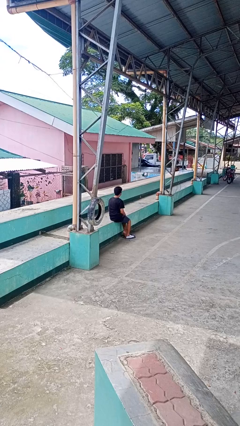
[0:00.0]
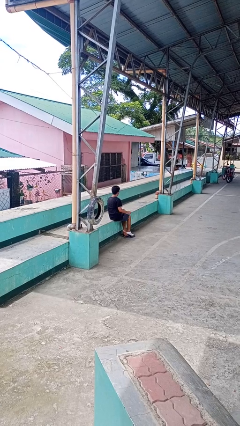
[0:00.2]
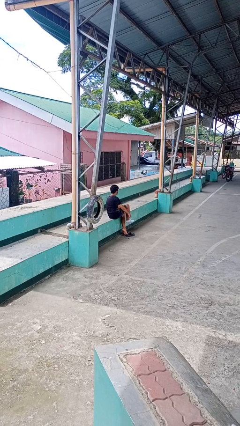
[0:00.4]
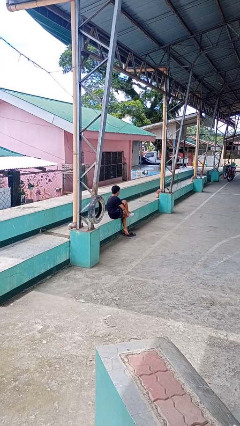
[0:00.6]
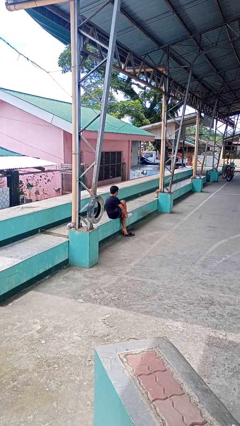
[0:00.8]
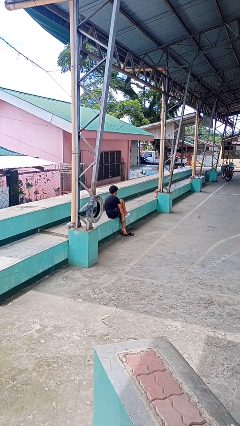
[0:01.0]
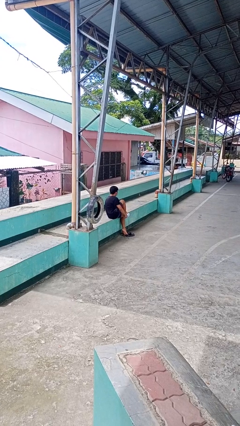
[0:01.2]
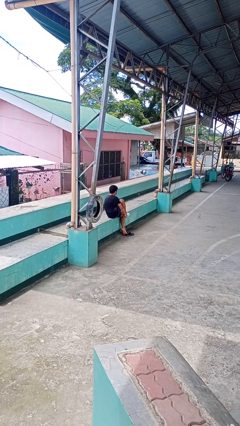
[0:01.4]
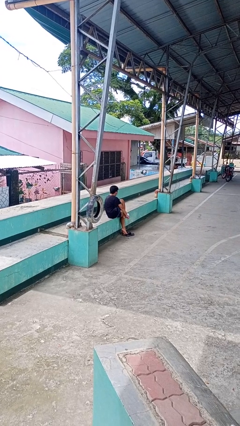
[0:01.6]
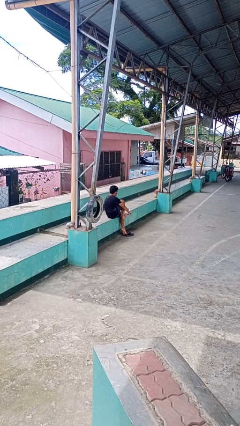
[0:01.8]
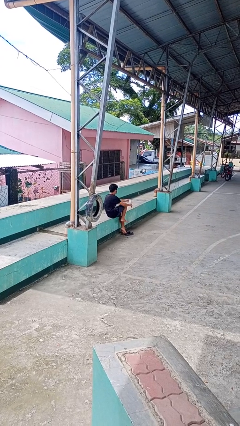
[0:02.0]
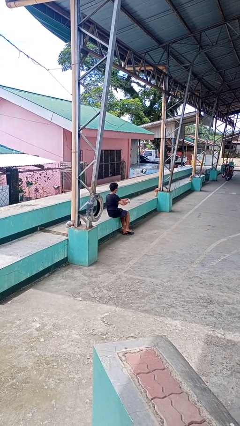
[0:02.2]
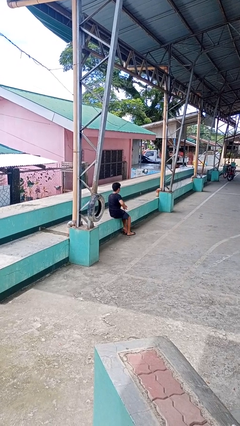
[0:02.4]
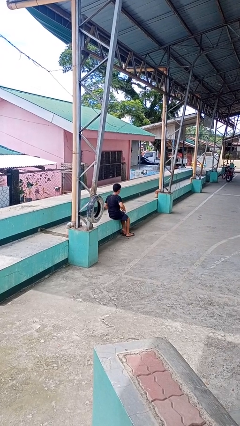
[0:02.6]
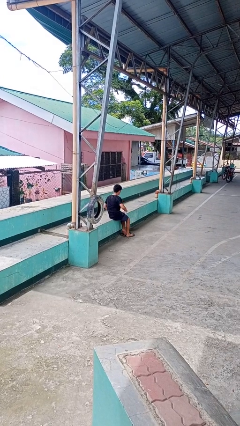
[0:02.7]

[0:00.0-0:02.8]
person takes off socks

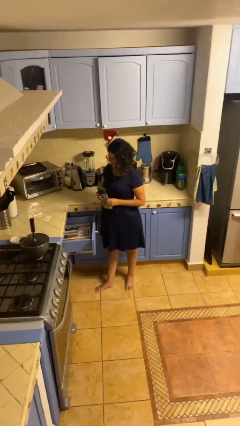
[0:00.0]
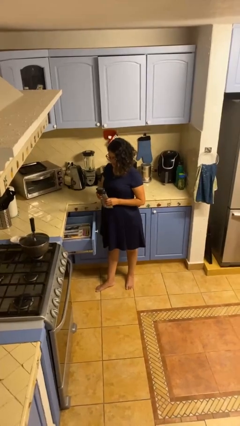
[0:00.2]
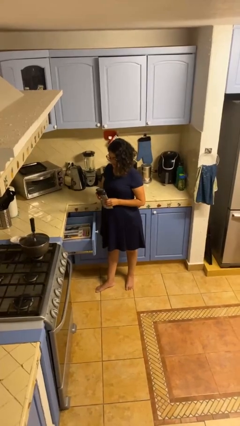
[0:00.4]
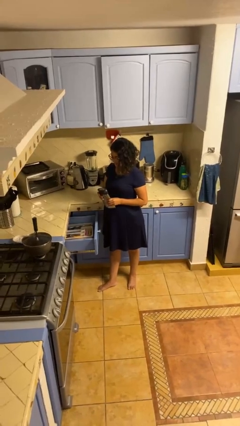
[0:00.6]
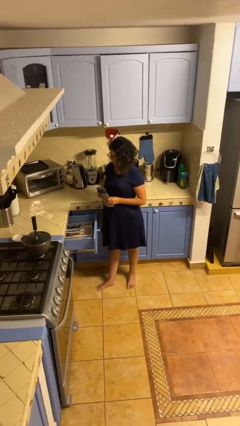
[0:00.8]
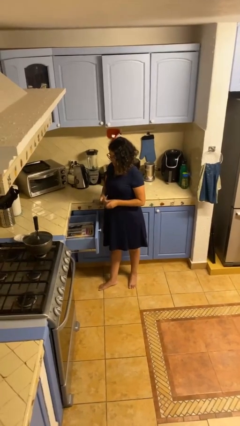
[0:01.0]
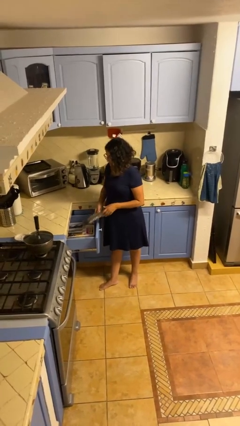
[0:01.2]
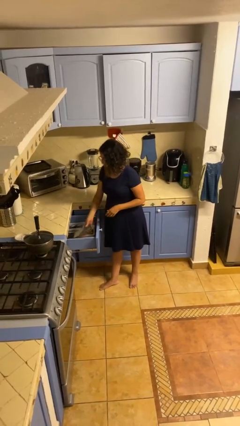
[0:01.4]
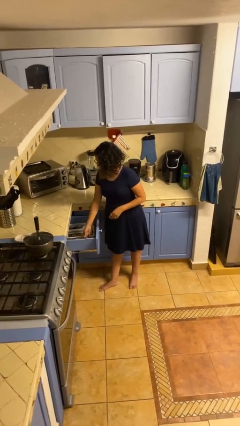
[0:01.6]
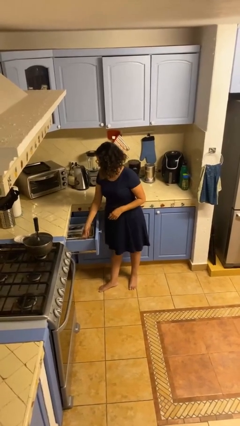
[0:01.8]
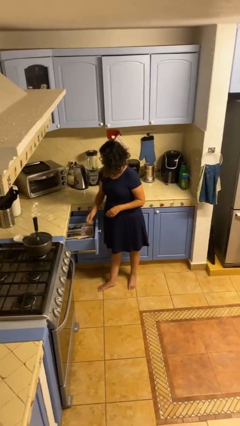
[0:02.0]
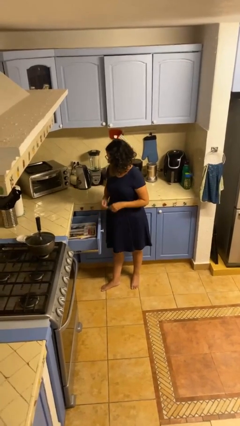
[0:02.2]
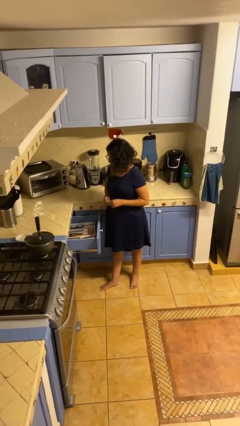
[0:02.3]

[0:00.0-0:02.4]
person puts object into kitchen drawer

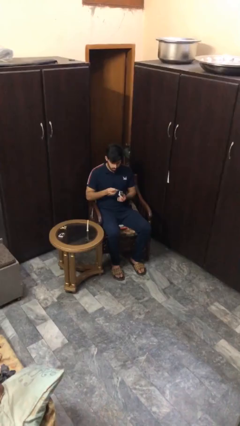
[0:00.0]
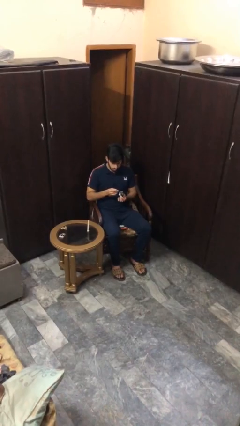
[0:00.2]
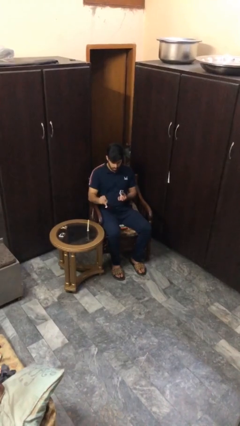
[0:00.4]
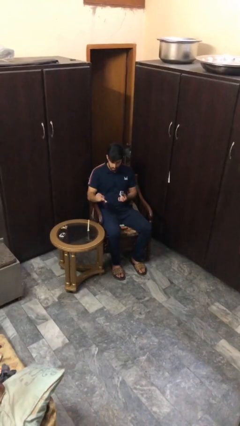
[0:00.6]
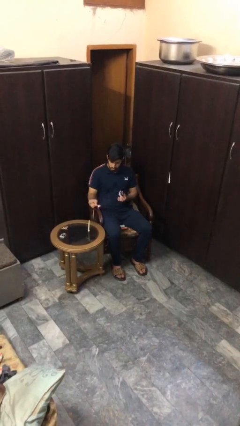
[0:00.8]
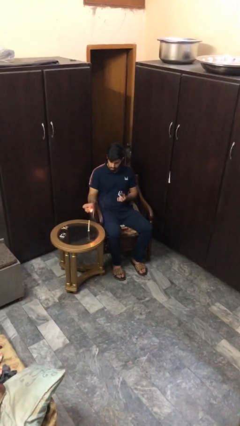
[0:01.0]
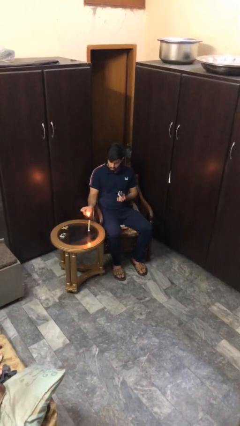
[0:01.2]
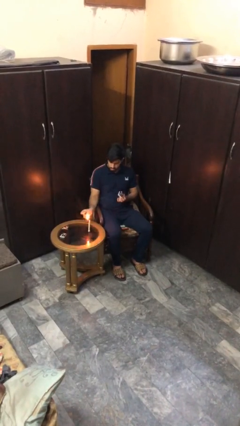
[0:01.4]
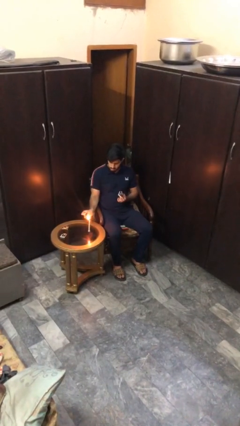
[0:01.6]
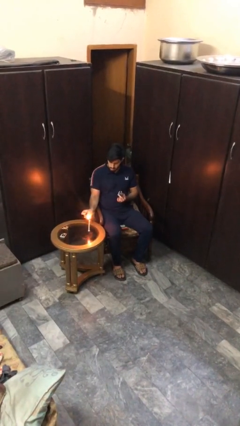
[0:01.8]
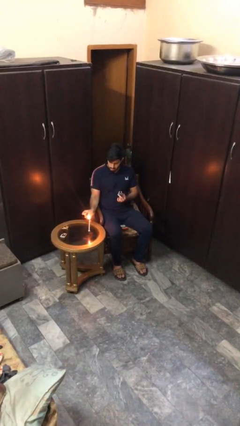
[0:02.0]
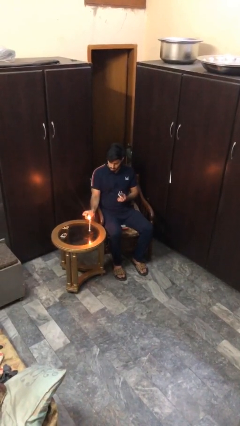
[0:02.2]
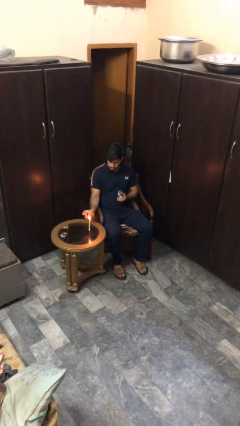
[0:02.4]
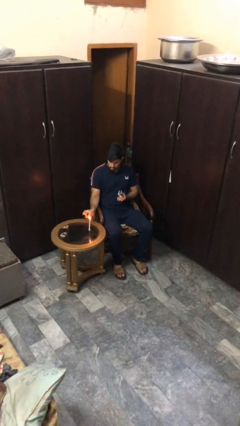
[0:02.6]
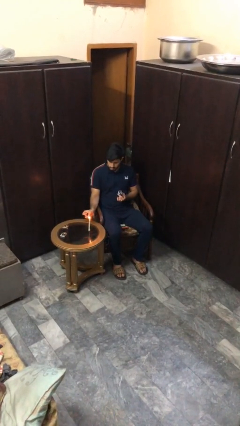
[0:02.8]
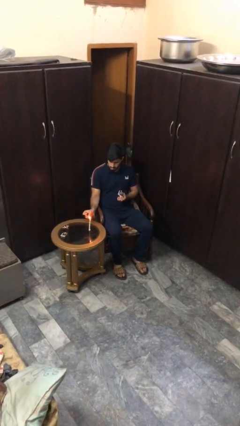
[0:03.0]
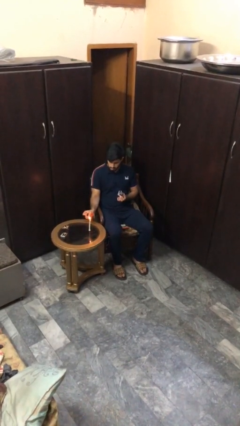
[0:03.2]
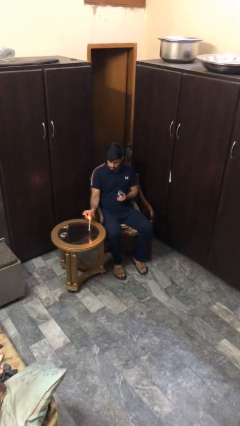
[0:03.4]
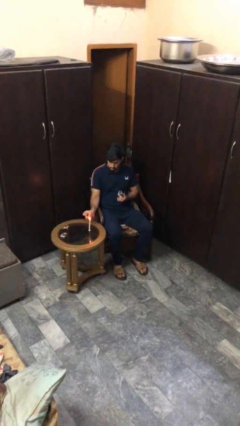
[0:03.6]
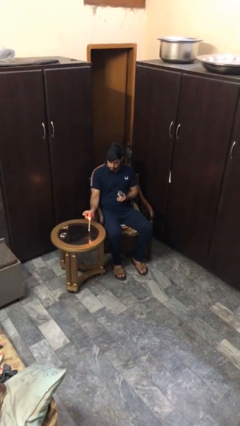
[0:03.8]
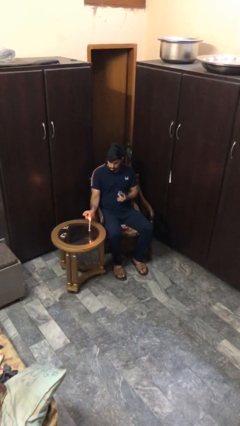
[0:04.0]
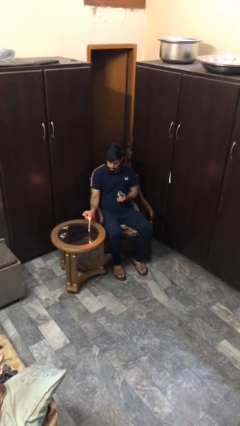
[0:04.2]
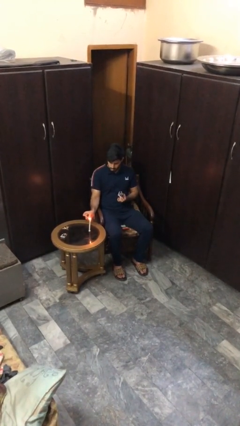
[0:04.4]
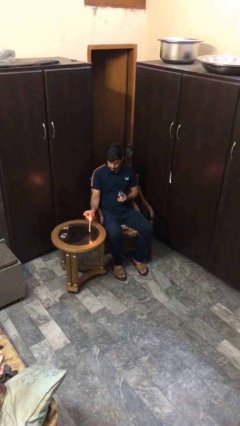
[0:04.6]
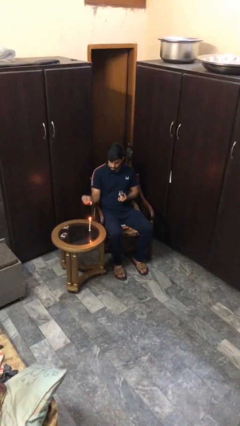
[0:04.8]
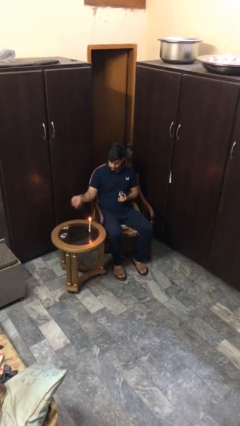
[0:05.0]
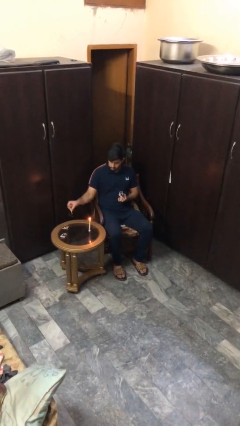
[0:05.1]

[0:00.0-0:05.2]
person lights candle

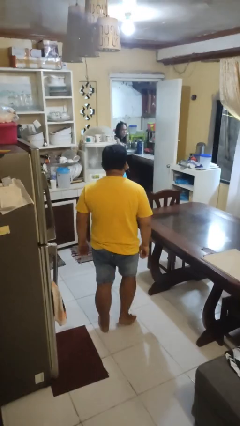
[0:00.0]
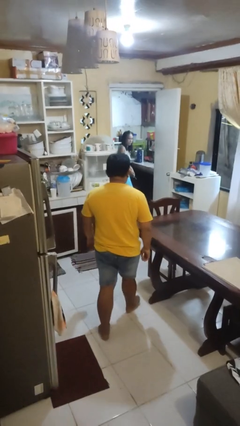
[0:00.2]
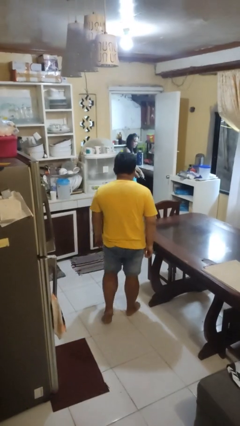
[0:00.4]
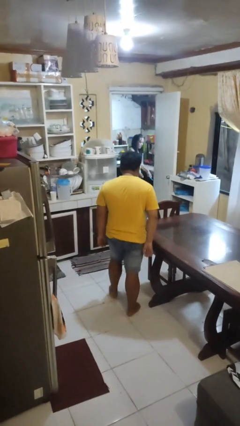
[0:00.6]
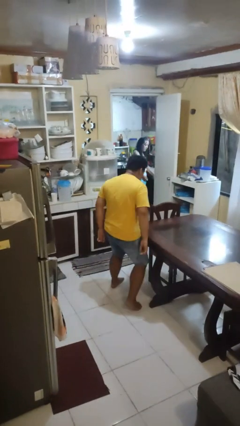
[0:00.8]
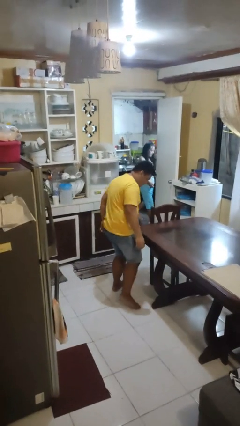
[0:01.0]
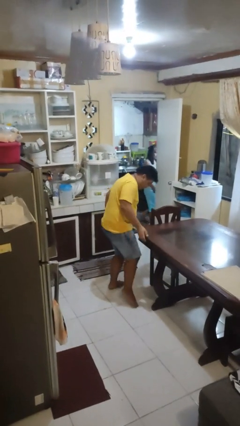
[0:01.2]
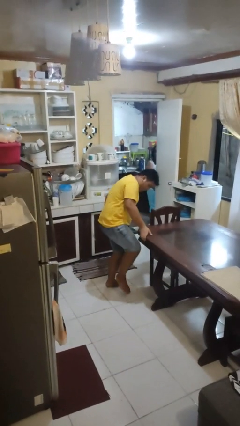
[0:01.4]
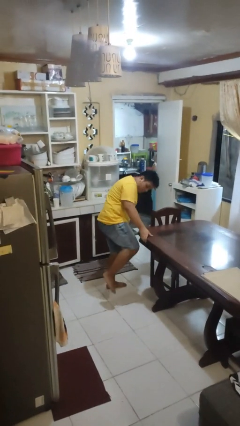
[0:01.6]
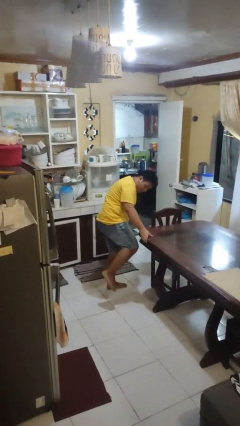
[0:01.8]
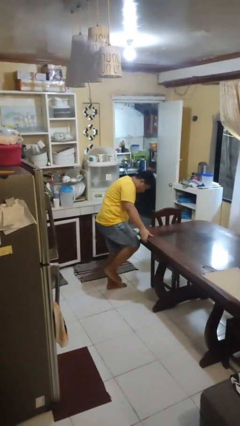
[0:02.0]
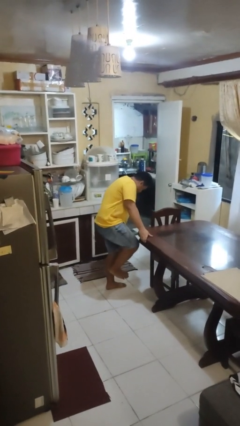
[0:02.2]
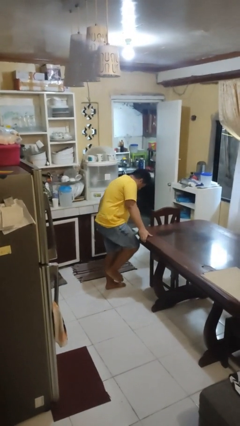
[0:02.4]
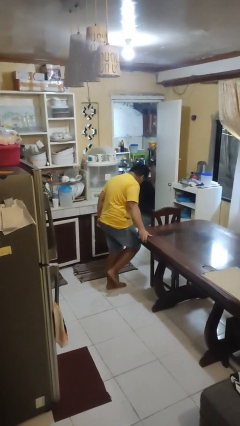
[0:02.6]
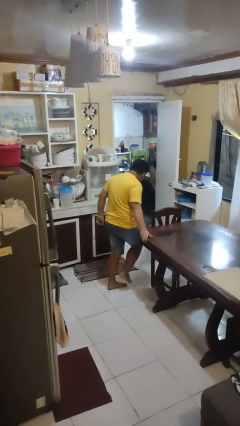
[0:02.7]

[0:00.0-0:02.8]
person bumps into table

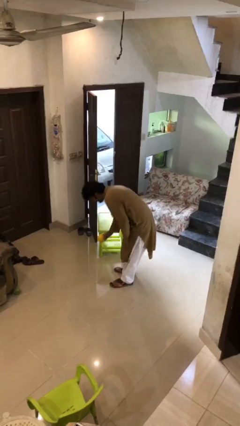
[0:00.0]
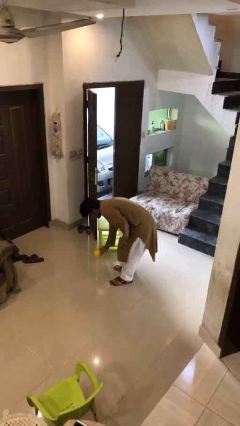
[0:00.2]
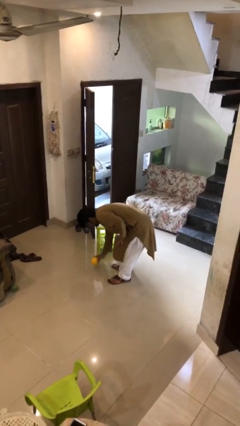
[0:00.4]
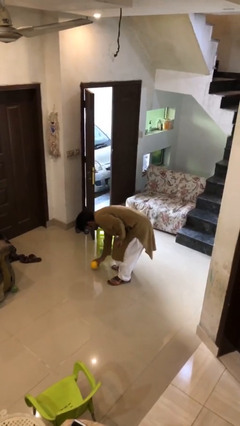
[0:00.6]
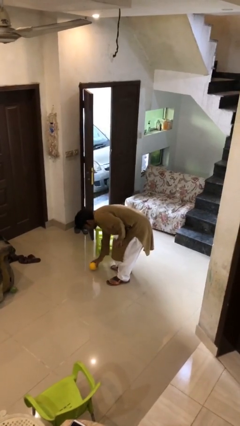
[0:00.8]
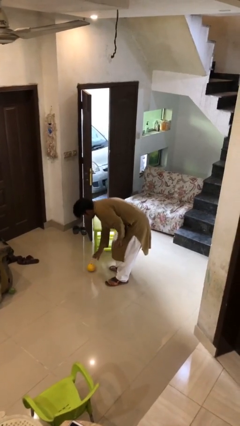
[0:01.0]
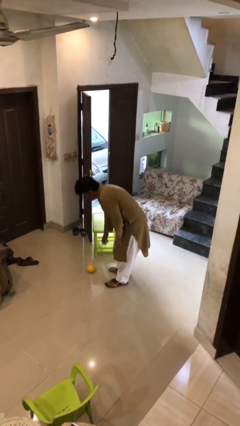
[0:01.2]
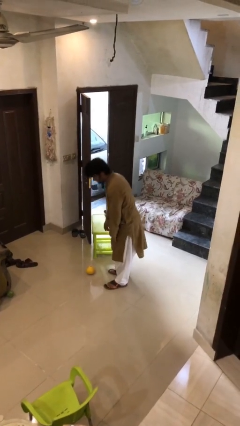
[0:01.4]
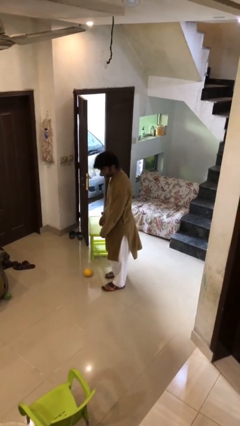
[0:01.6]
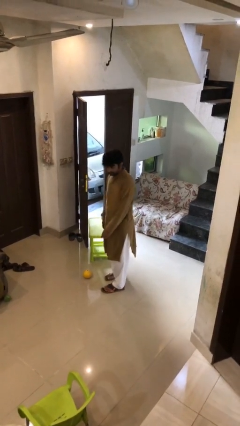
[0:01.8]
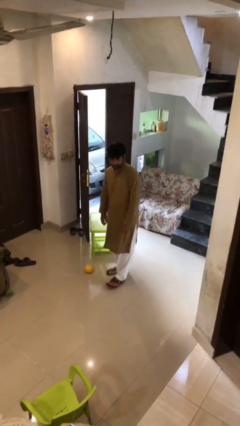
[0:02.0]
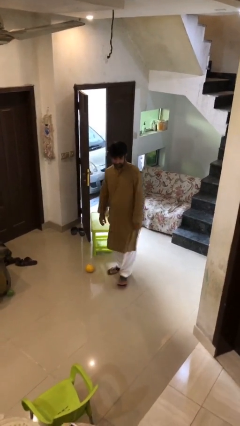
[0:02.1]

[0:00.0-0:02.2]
person puts down object on floor

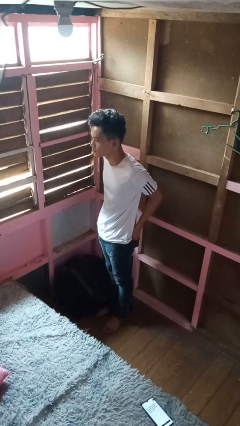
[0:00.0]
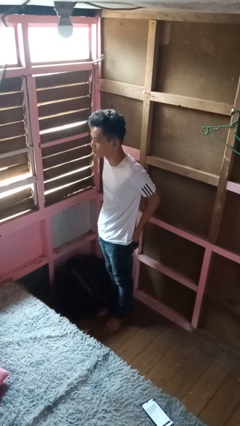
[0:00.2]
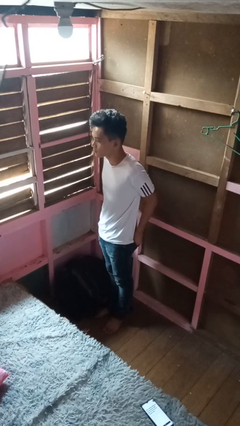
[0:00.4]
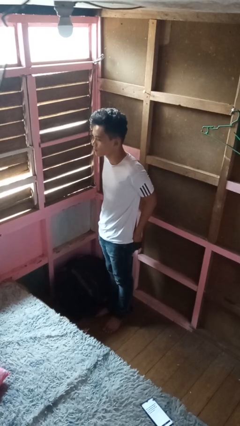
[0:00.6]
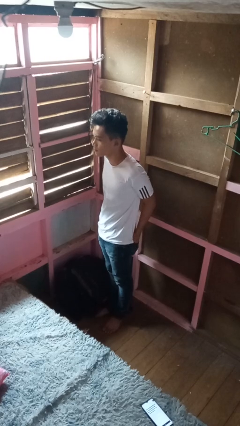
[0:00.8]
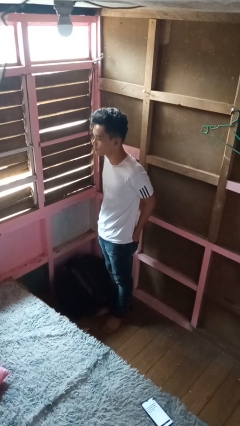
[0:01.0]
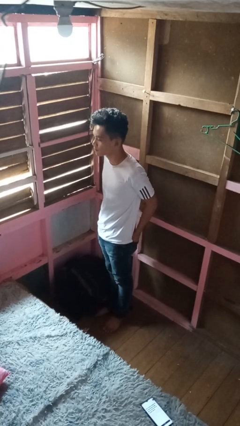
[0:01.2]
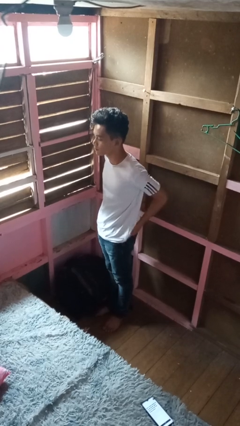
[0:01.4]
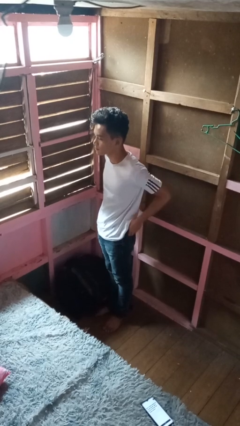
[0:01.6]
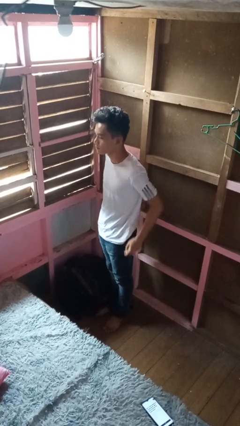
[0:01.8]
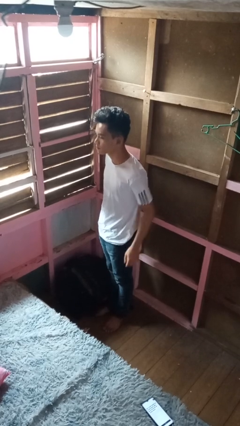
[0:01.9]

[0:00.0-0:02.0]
person puts hands in back pockets
